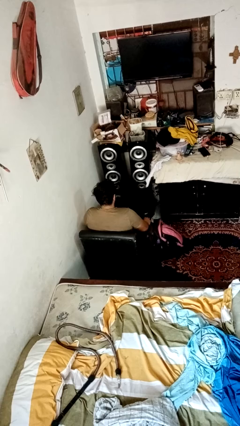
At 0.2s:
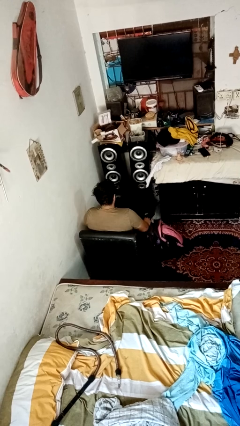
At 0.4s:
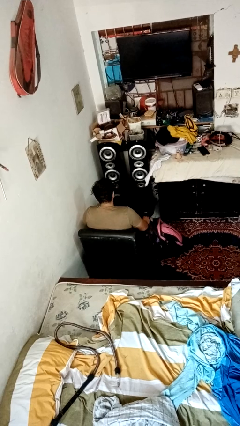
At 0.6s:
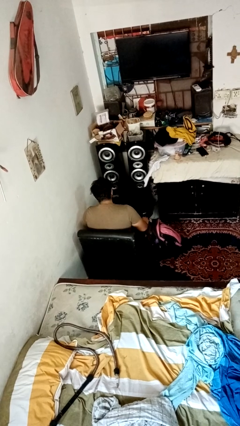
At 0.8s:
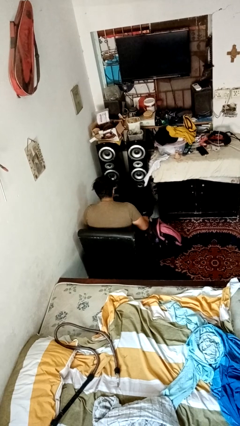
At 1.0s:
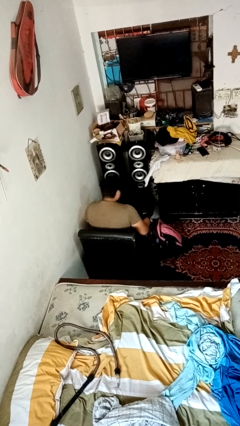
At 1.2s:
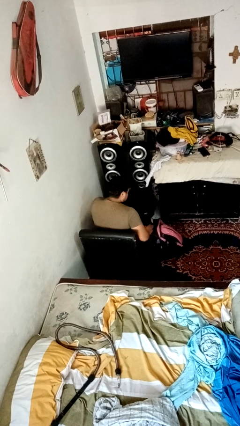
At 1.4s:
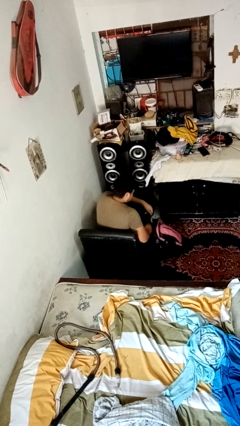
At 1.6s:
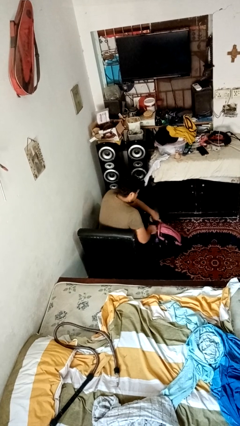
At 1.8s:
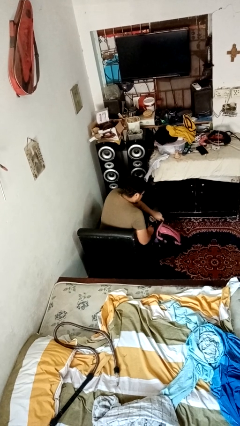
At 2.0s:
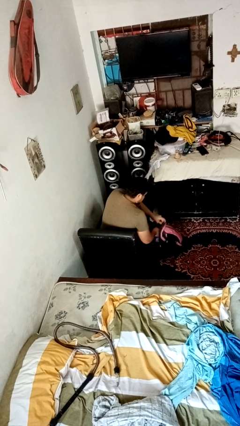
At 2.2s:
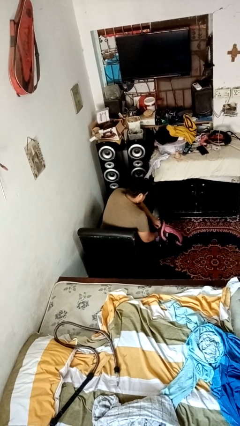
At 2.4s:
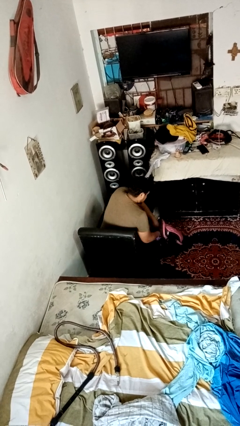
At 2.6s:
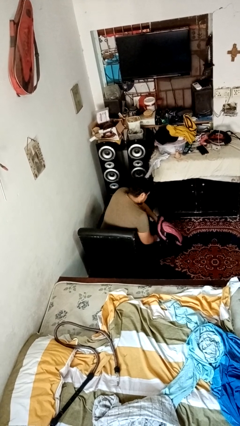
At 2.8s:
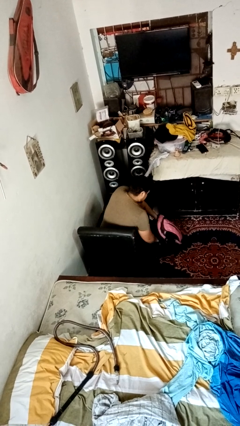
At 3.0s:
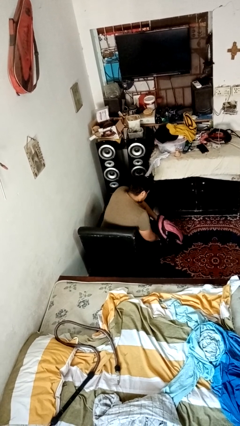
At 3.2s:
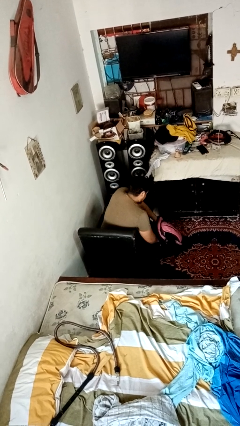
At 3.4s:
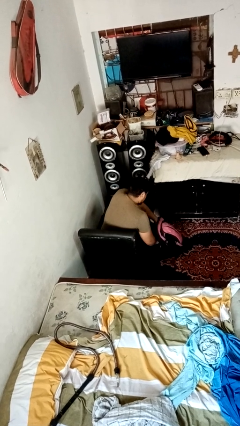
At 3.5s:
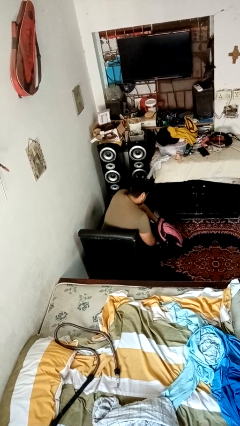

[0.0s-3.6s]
person searches in bag

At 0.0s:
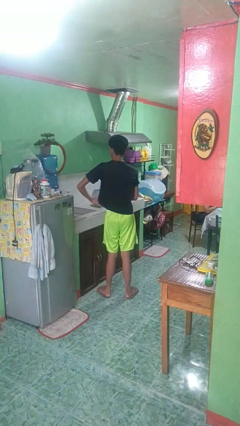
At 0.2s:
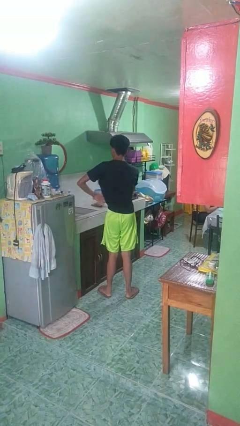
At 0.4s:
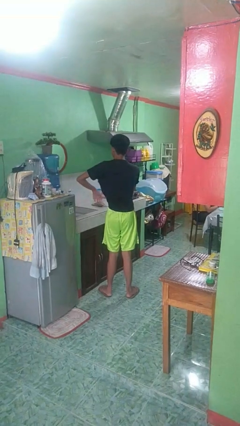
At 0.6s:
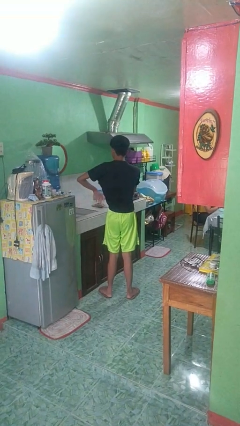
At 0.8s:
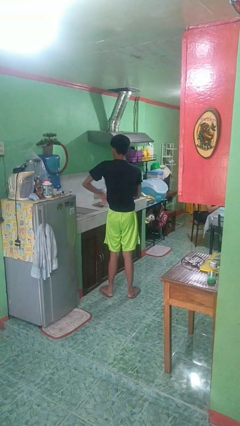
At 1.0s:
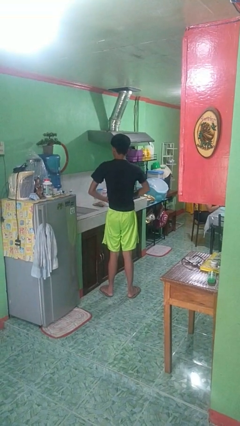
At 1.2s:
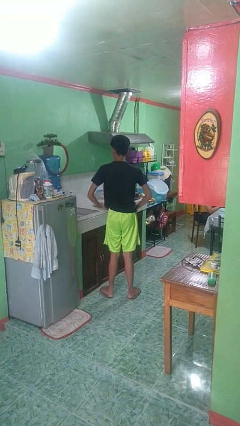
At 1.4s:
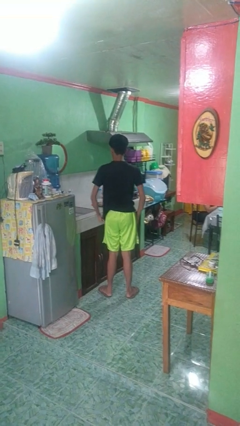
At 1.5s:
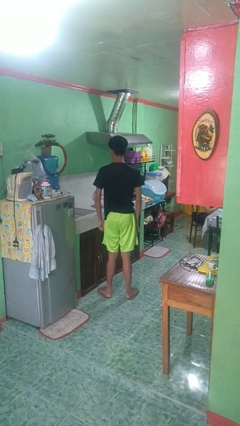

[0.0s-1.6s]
person applies deodorant

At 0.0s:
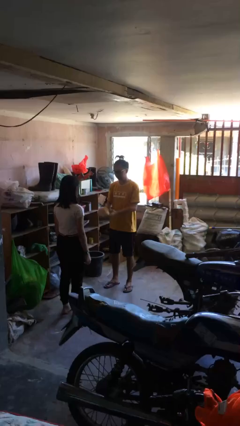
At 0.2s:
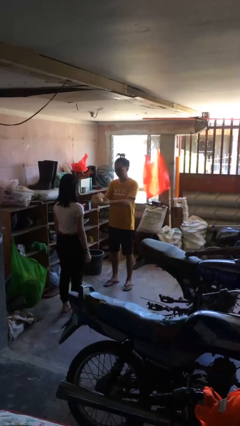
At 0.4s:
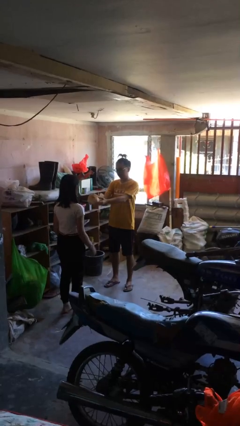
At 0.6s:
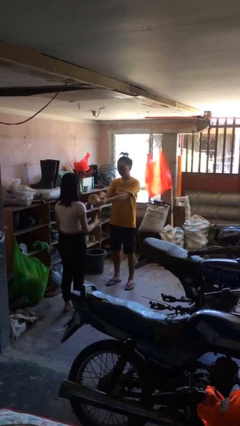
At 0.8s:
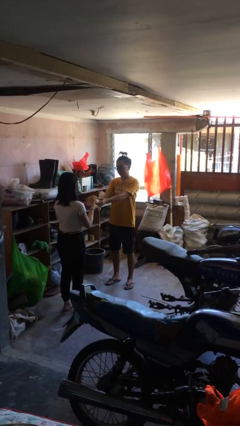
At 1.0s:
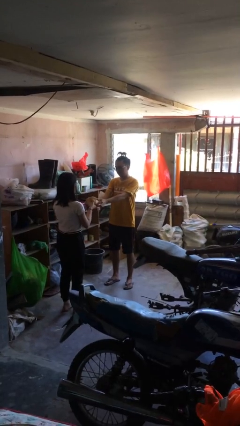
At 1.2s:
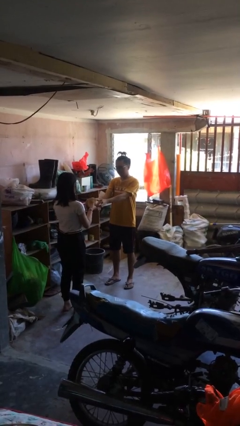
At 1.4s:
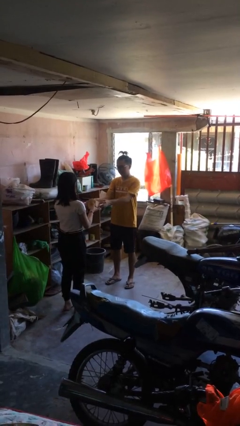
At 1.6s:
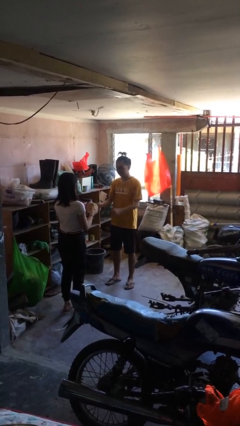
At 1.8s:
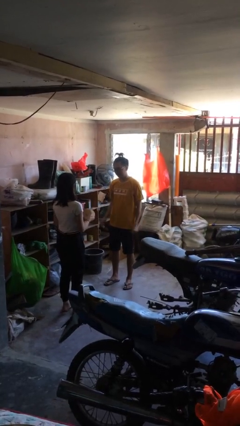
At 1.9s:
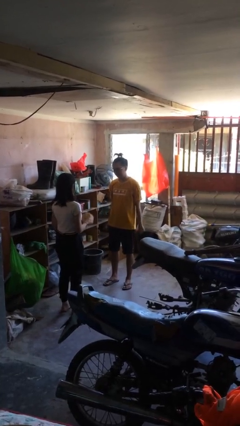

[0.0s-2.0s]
person transfers object to person

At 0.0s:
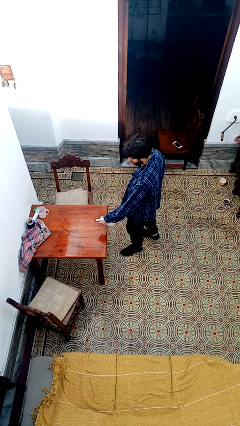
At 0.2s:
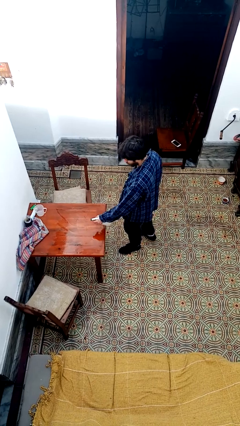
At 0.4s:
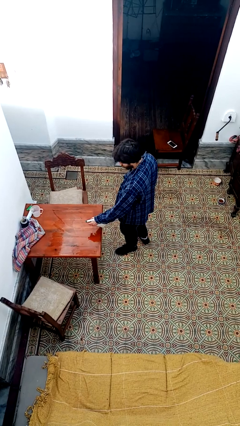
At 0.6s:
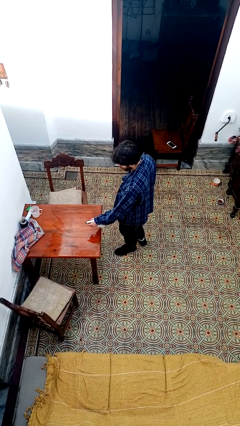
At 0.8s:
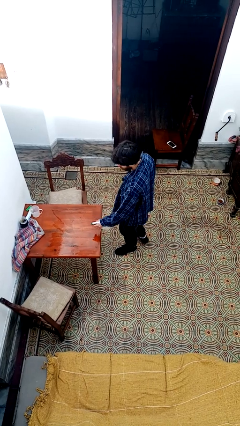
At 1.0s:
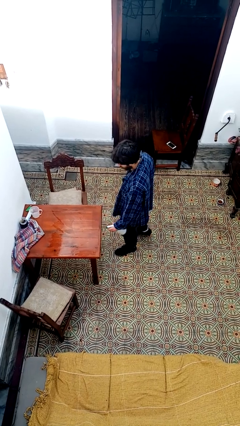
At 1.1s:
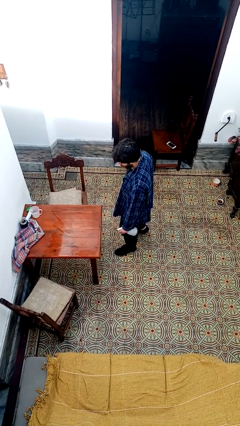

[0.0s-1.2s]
person sprays from bottle

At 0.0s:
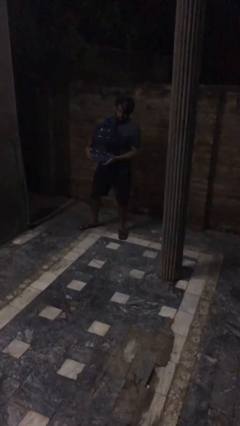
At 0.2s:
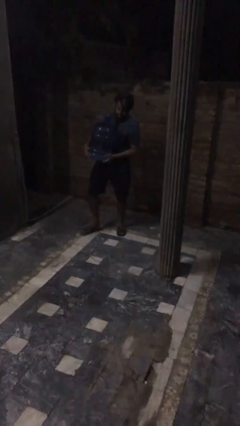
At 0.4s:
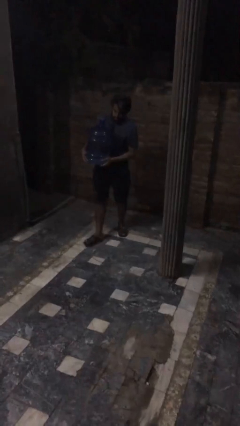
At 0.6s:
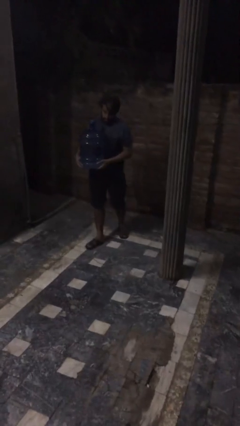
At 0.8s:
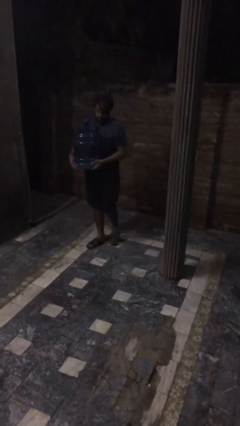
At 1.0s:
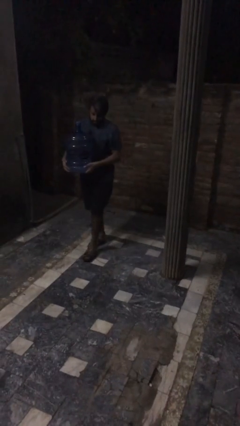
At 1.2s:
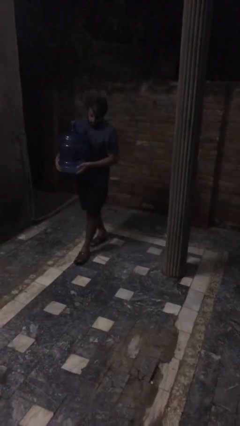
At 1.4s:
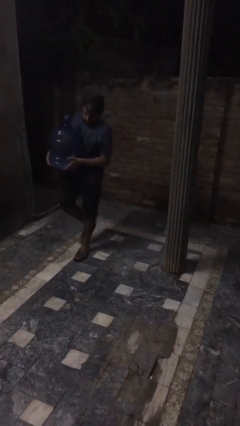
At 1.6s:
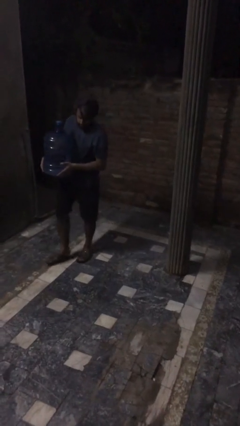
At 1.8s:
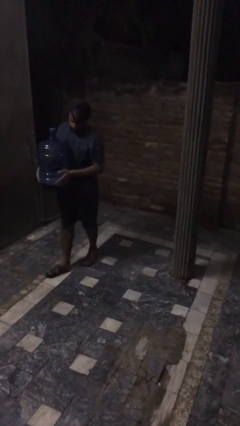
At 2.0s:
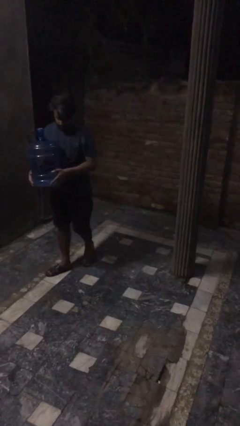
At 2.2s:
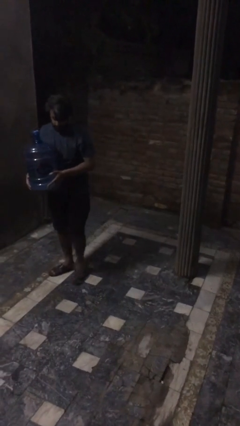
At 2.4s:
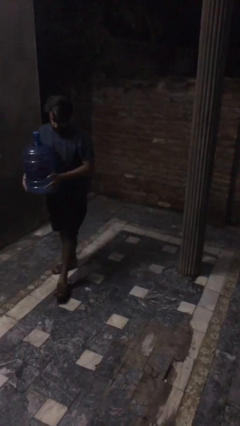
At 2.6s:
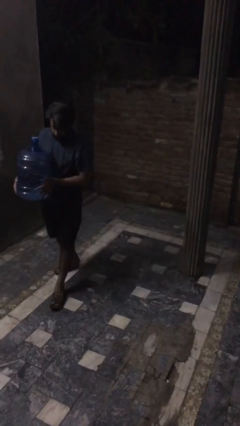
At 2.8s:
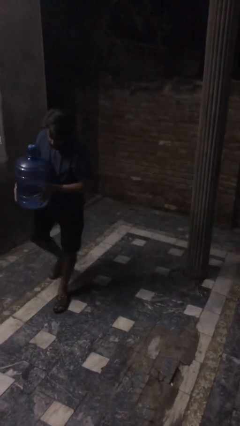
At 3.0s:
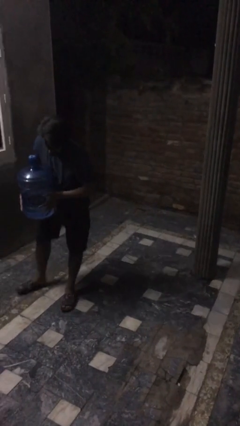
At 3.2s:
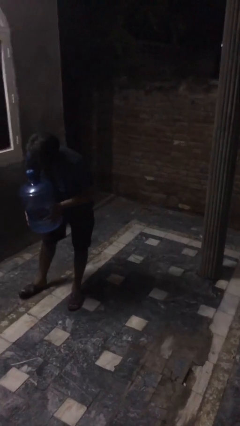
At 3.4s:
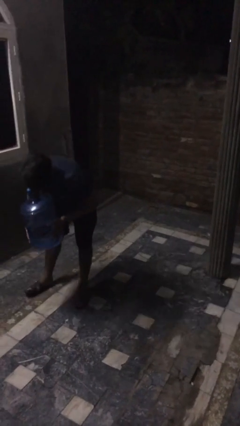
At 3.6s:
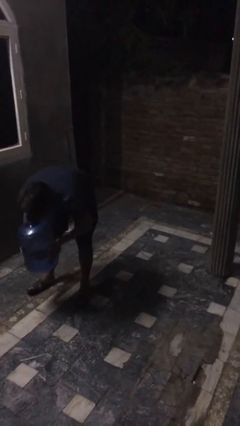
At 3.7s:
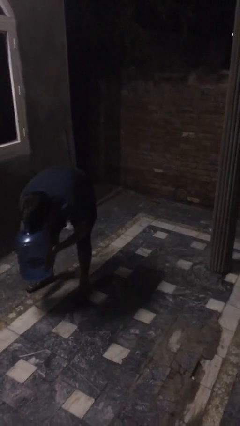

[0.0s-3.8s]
person carries heavy object

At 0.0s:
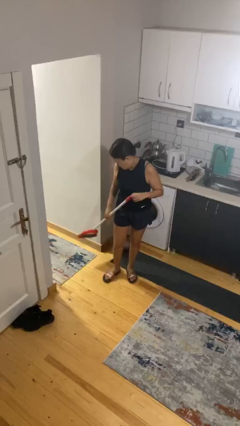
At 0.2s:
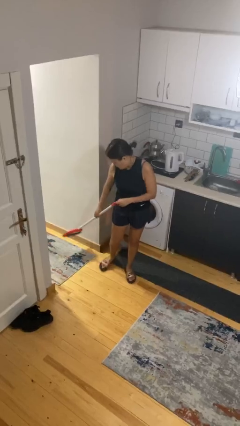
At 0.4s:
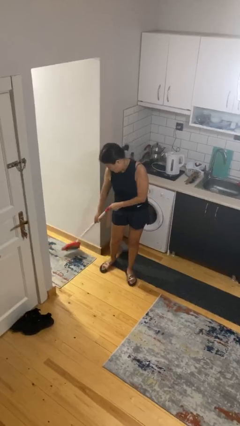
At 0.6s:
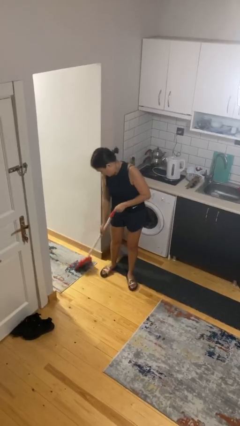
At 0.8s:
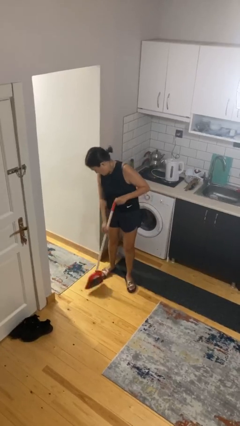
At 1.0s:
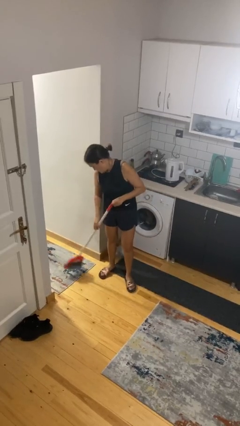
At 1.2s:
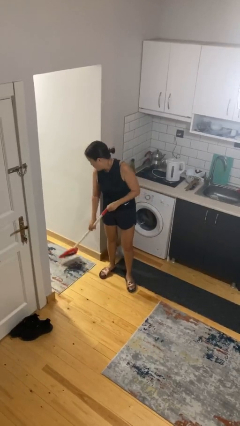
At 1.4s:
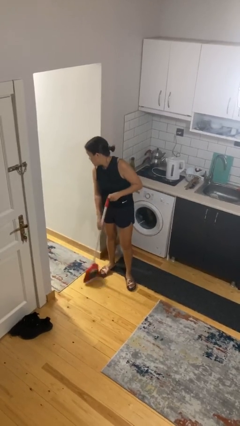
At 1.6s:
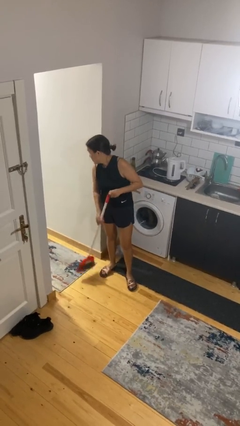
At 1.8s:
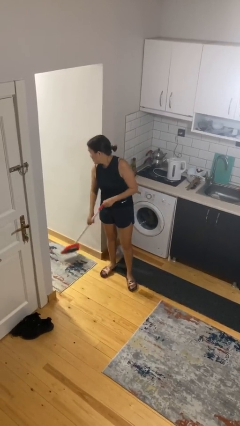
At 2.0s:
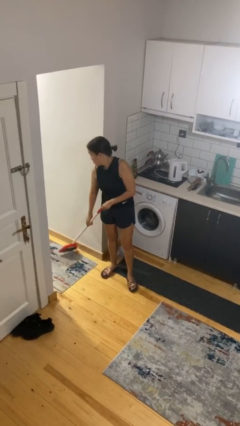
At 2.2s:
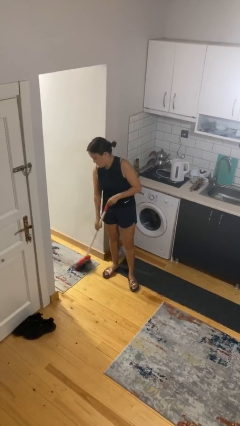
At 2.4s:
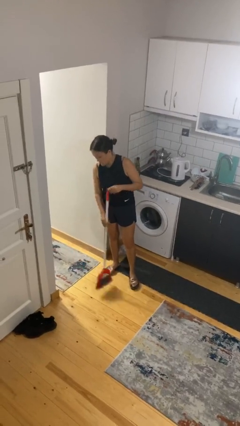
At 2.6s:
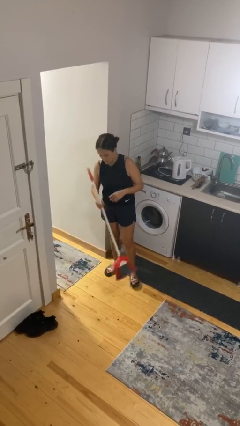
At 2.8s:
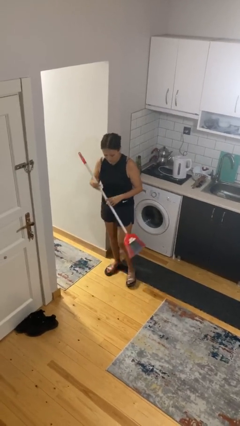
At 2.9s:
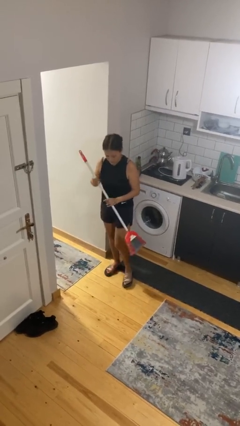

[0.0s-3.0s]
person sweeps floor

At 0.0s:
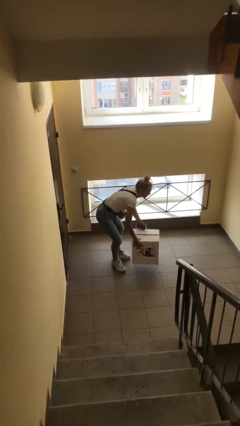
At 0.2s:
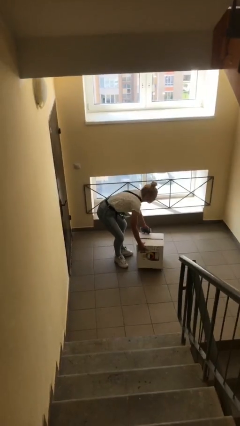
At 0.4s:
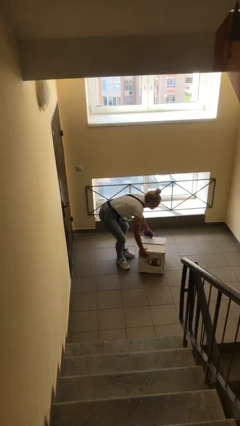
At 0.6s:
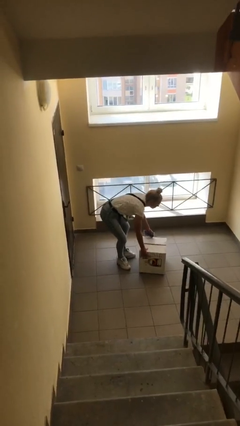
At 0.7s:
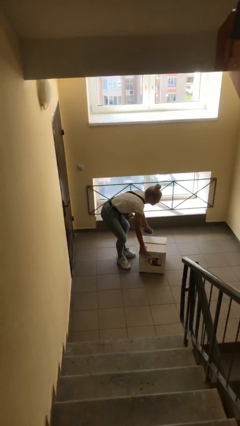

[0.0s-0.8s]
person puts down object on floor

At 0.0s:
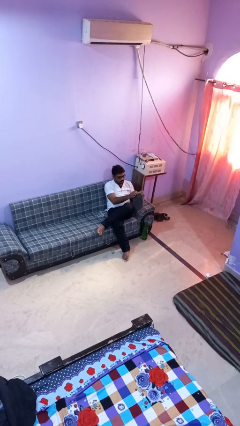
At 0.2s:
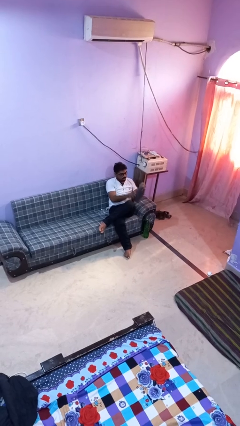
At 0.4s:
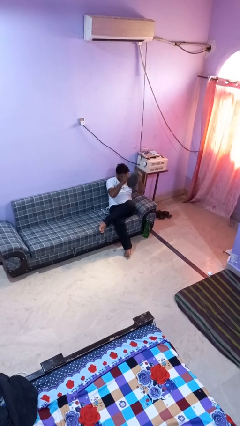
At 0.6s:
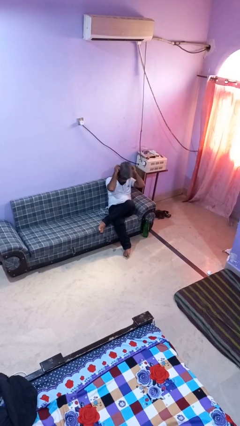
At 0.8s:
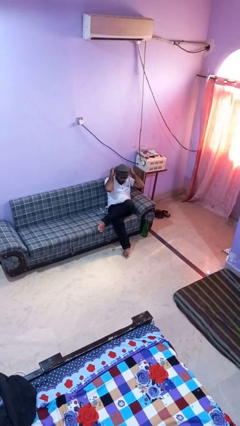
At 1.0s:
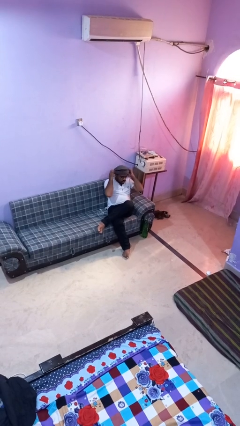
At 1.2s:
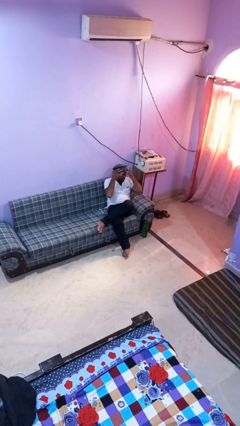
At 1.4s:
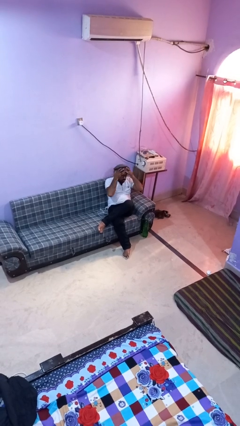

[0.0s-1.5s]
person puts on hat
